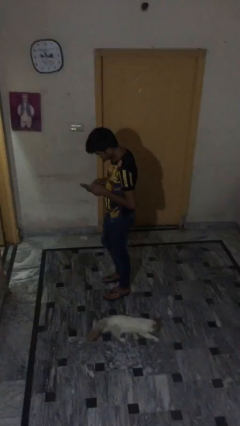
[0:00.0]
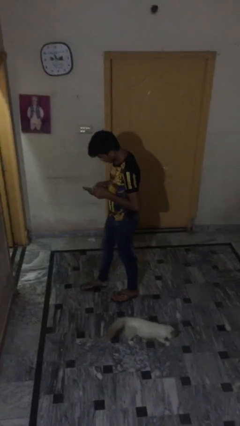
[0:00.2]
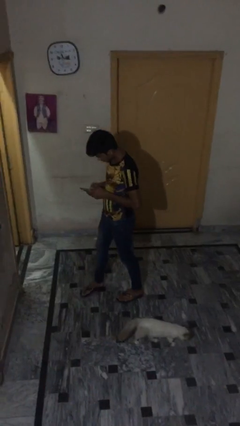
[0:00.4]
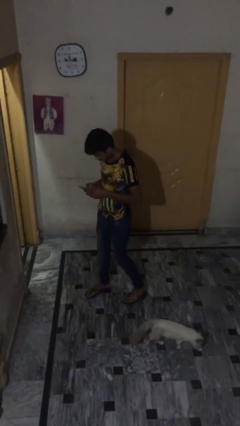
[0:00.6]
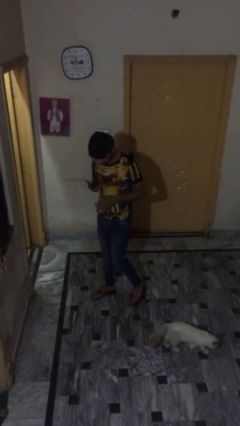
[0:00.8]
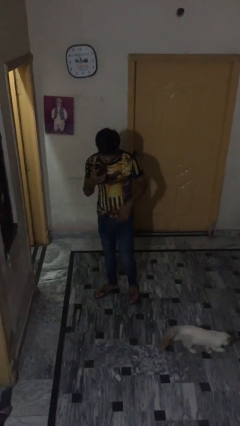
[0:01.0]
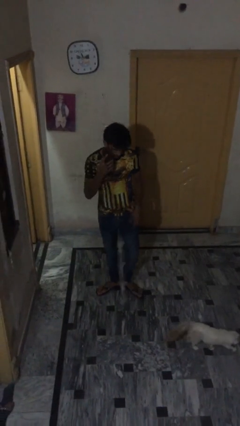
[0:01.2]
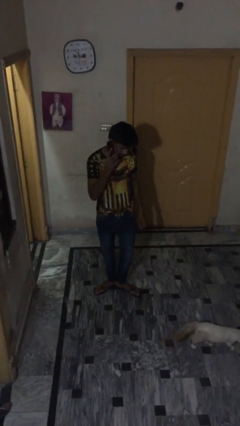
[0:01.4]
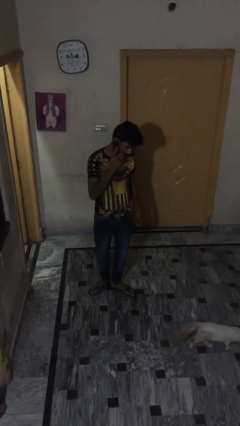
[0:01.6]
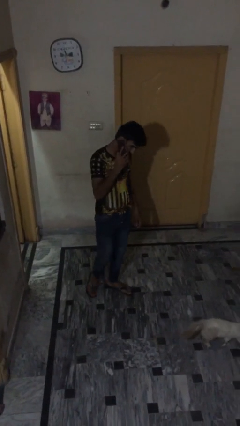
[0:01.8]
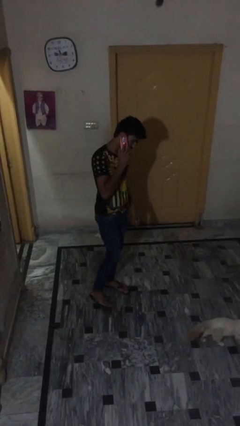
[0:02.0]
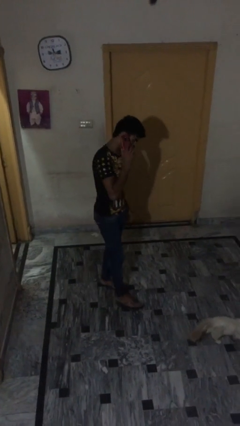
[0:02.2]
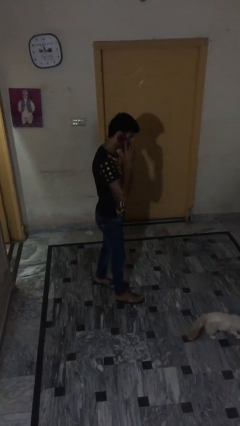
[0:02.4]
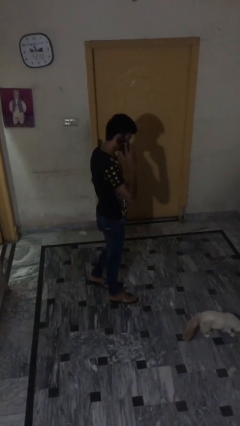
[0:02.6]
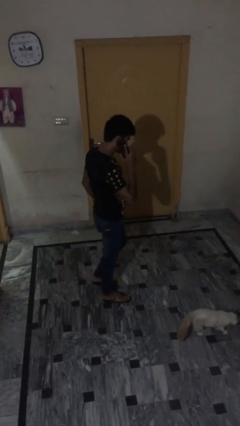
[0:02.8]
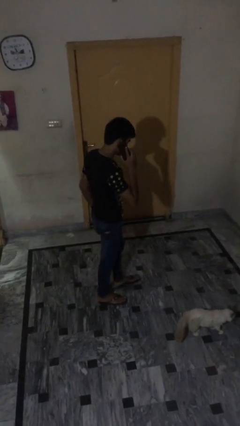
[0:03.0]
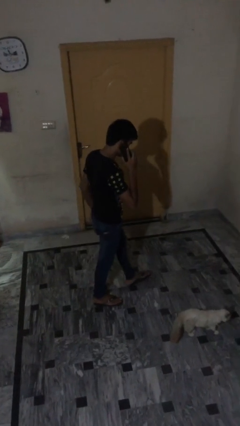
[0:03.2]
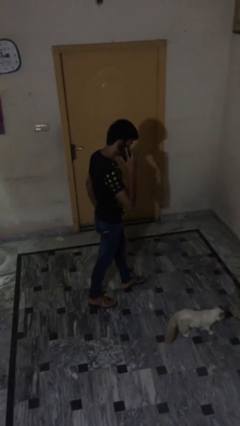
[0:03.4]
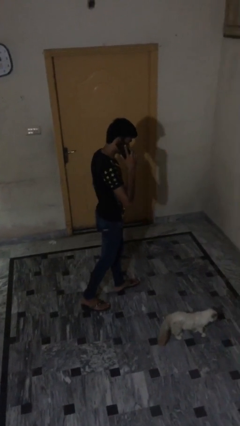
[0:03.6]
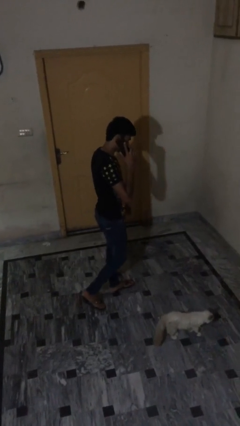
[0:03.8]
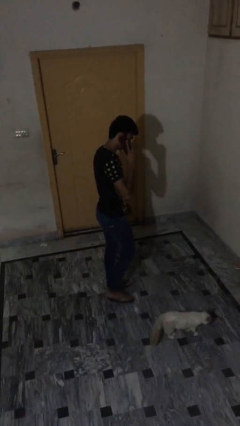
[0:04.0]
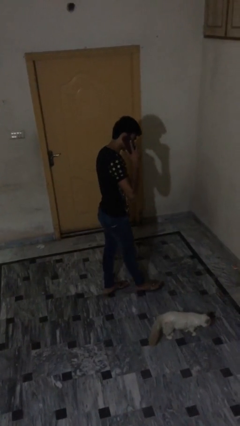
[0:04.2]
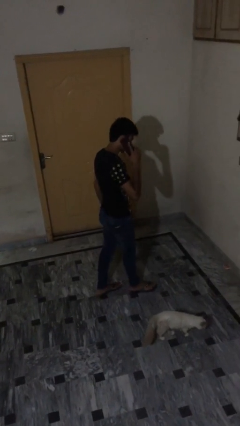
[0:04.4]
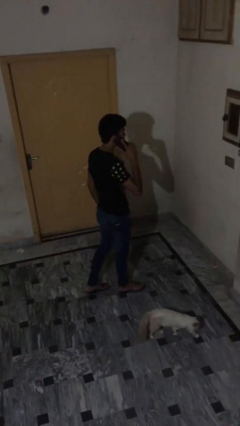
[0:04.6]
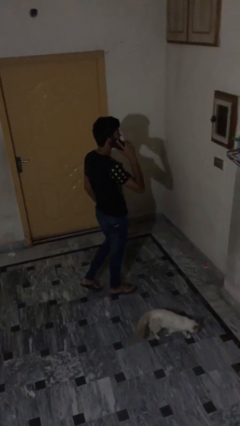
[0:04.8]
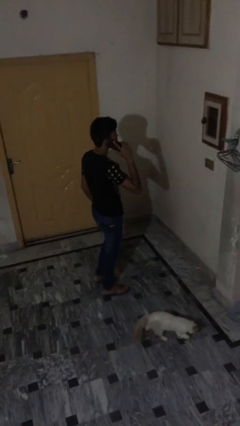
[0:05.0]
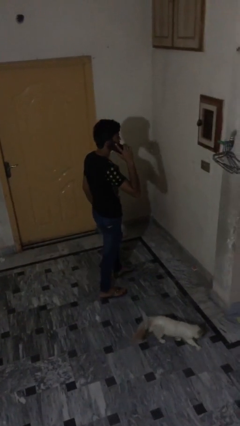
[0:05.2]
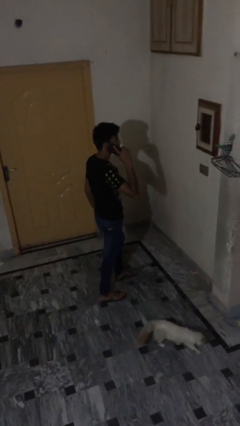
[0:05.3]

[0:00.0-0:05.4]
person talks on phone

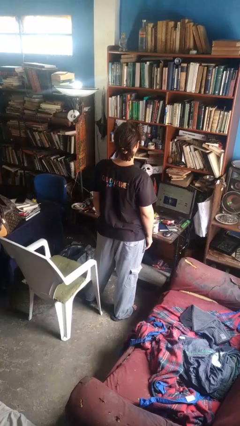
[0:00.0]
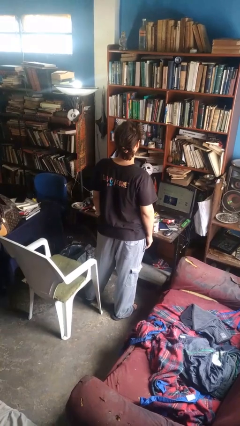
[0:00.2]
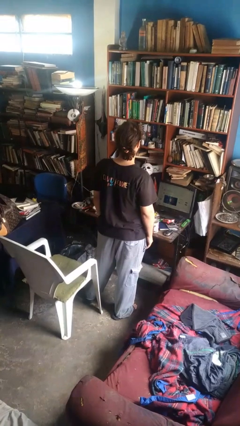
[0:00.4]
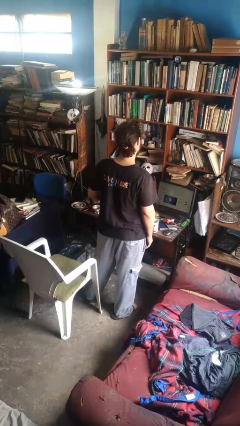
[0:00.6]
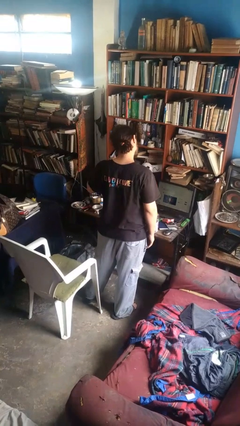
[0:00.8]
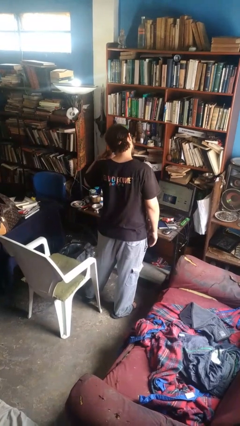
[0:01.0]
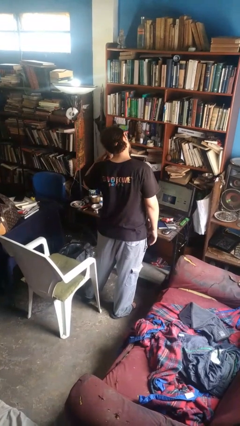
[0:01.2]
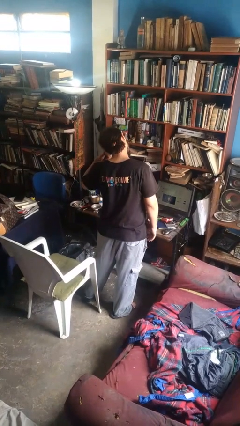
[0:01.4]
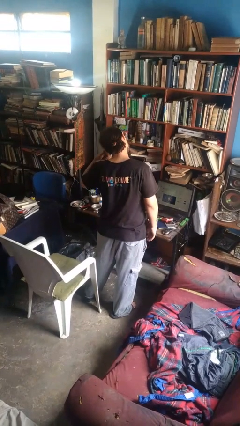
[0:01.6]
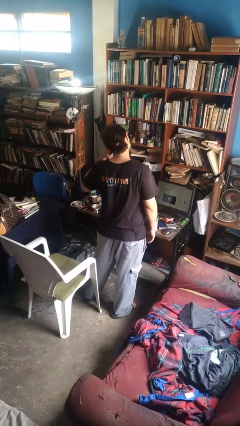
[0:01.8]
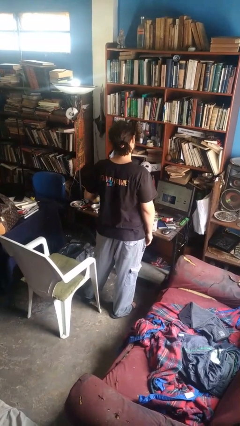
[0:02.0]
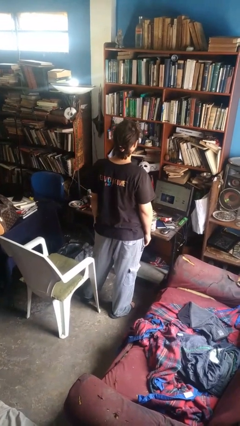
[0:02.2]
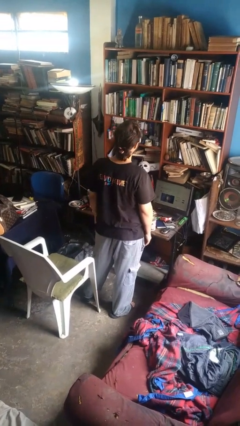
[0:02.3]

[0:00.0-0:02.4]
person gestures call me

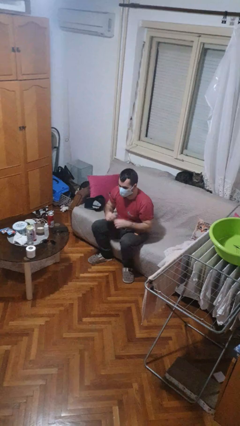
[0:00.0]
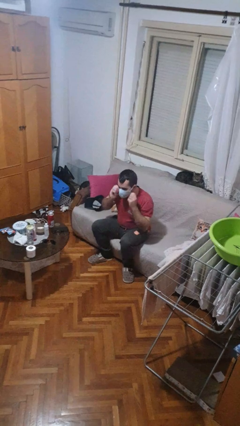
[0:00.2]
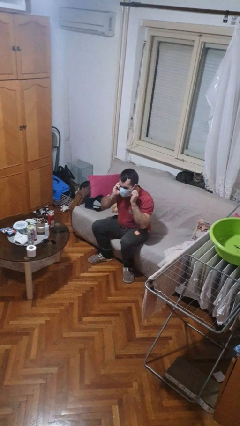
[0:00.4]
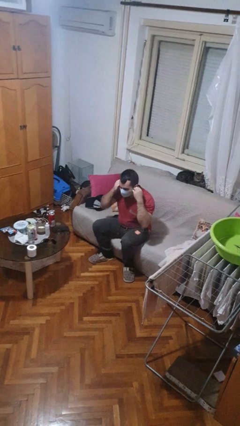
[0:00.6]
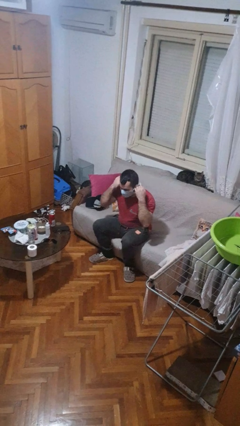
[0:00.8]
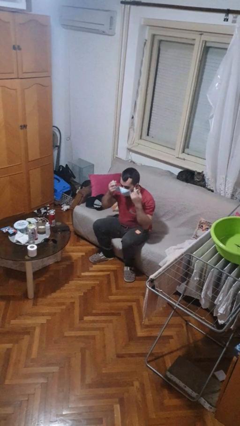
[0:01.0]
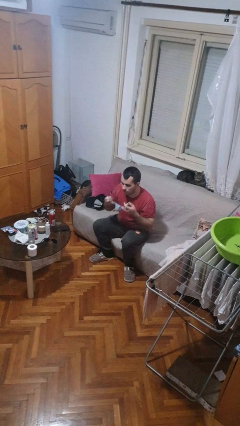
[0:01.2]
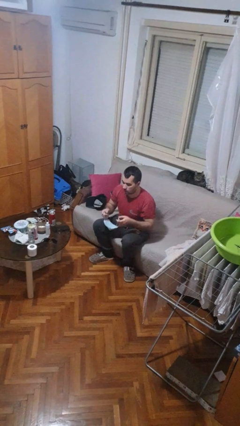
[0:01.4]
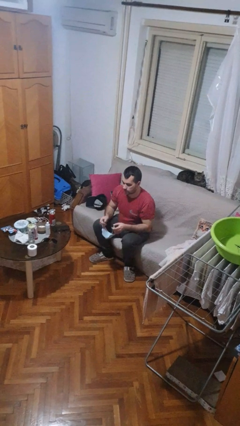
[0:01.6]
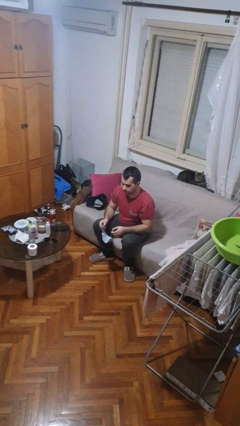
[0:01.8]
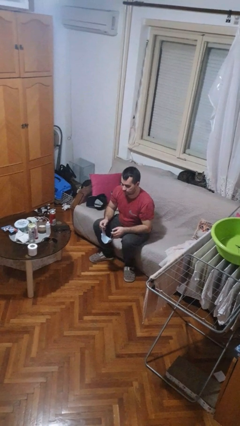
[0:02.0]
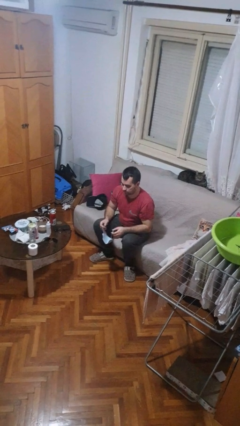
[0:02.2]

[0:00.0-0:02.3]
person takes off facemask

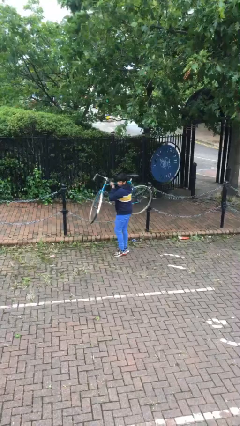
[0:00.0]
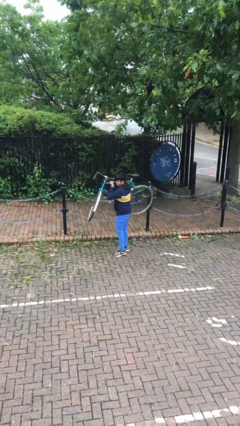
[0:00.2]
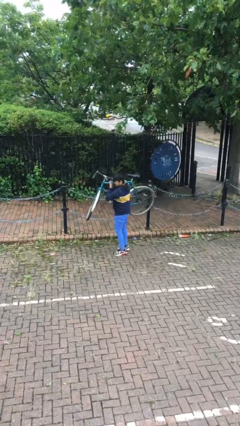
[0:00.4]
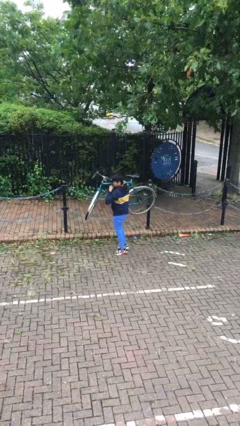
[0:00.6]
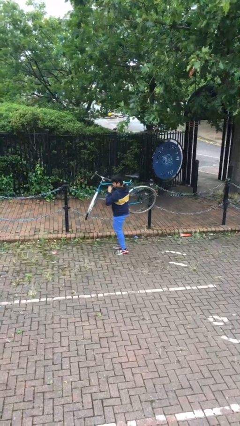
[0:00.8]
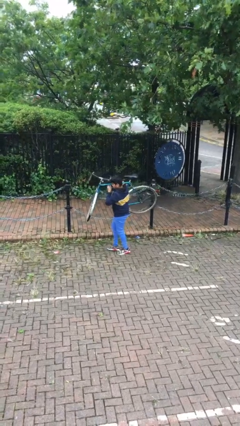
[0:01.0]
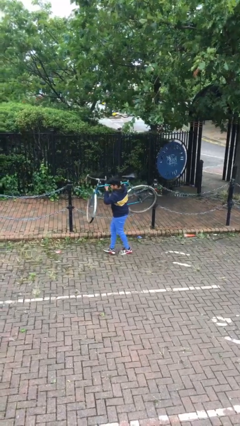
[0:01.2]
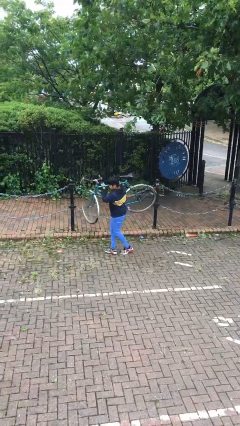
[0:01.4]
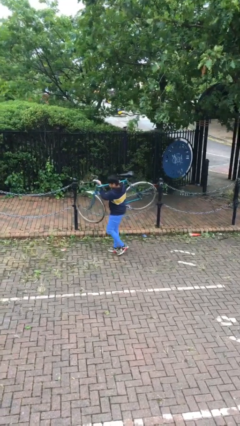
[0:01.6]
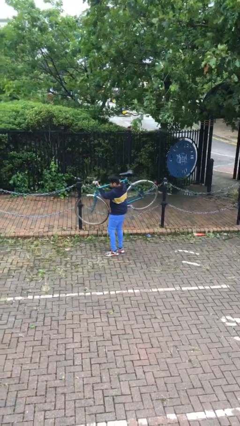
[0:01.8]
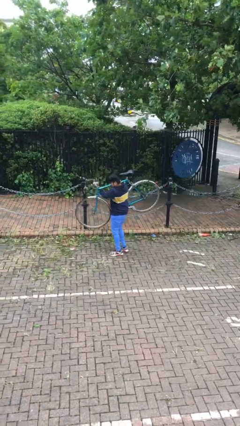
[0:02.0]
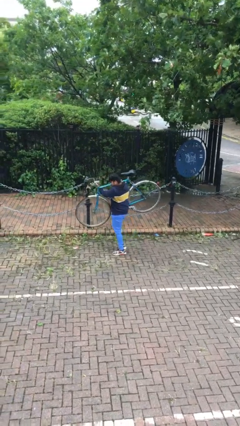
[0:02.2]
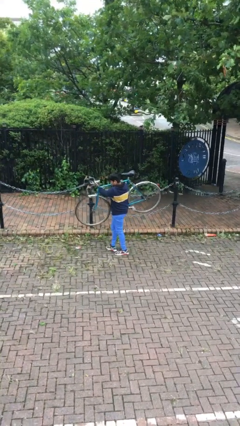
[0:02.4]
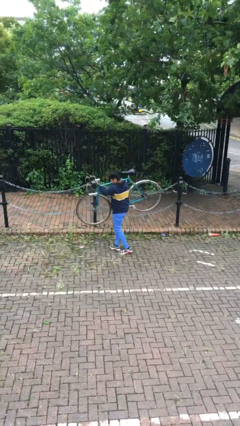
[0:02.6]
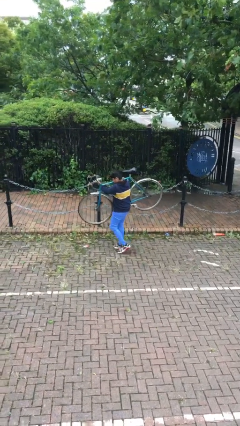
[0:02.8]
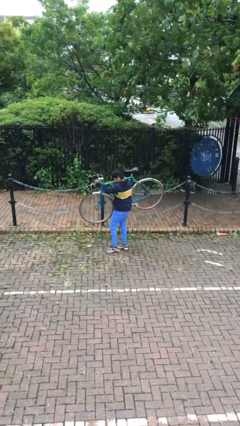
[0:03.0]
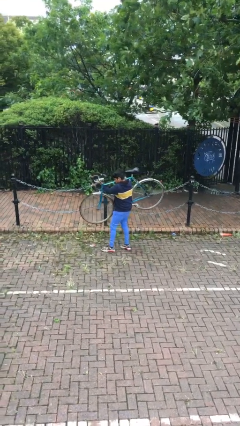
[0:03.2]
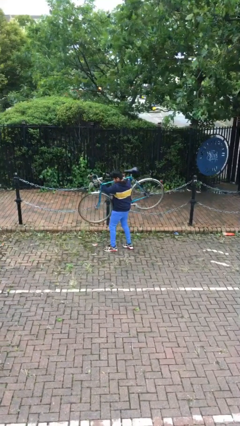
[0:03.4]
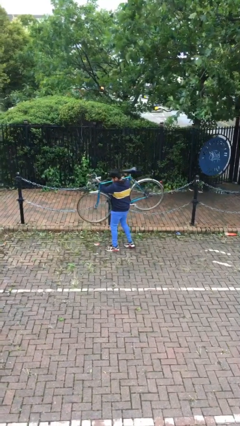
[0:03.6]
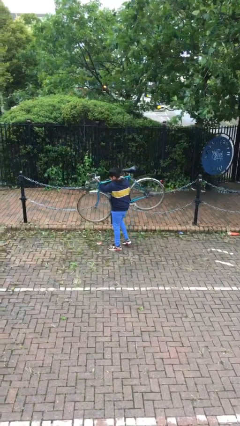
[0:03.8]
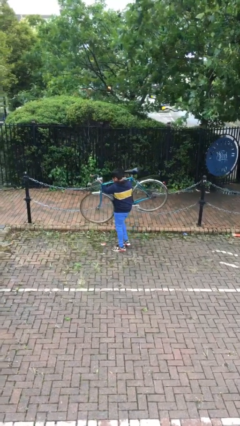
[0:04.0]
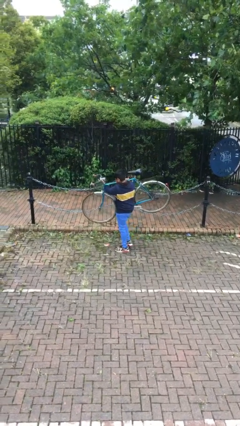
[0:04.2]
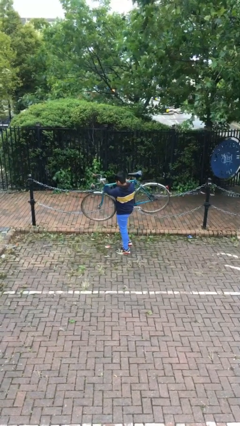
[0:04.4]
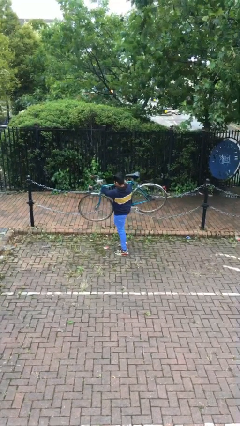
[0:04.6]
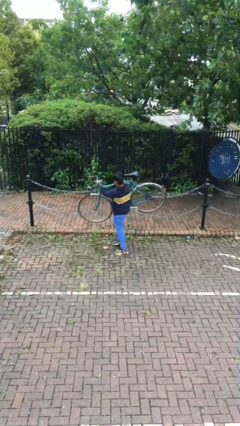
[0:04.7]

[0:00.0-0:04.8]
person carries heavy object

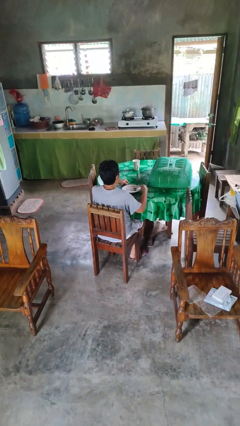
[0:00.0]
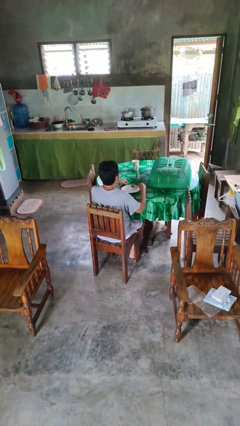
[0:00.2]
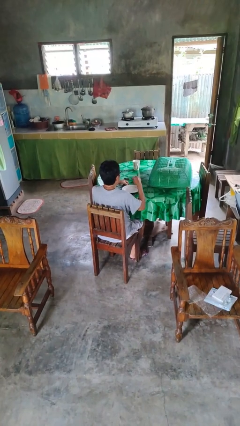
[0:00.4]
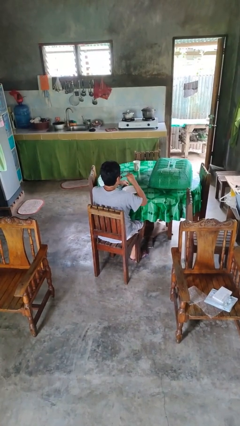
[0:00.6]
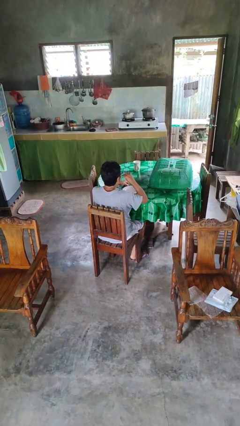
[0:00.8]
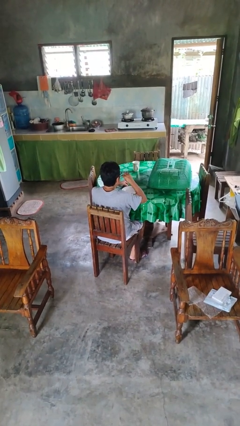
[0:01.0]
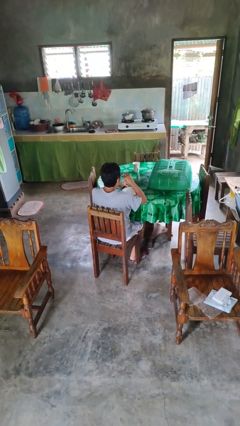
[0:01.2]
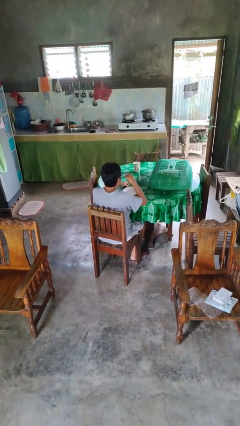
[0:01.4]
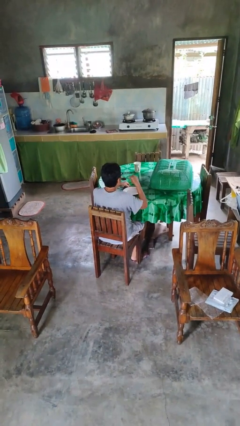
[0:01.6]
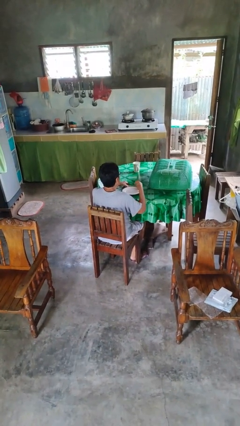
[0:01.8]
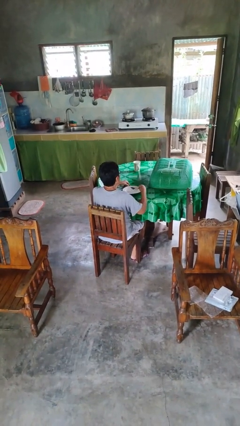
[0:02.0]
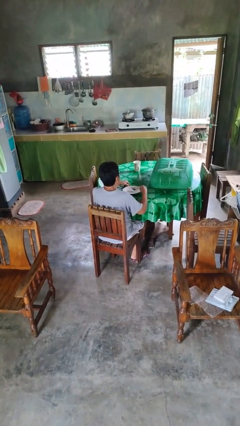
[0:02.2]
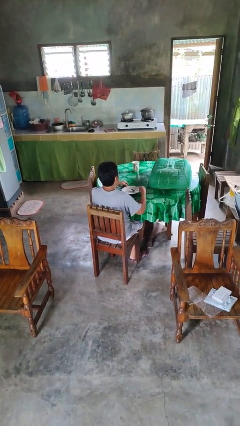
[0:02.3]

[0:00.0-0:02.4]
person eats with utensil

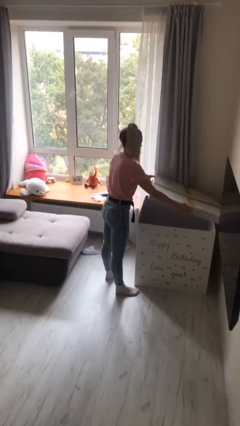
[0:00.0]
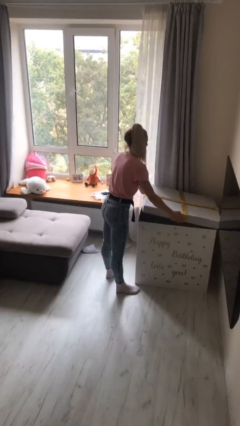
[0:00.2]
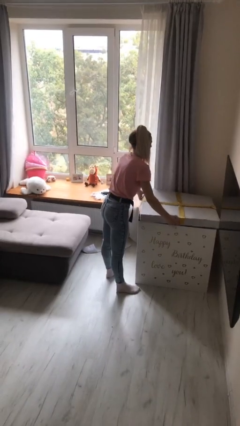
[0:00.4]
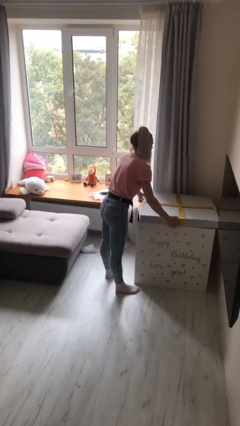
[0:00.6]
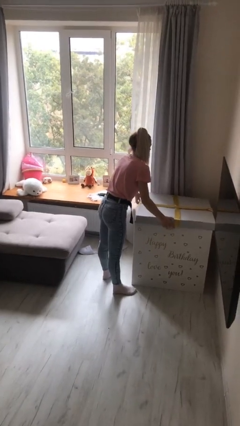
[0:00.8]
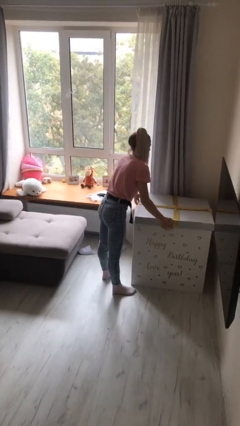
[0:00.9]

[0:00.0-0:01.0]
person closes box
